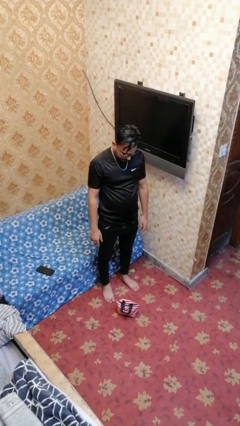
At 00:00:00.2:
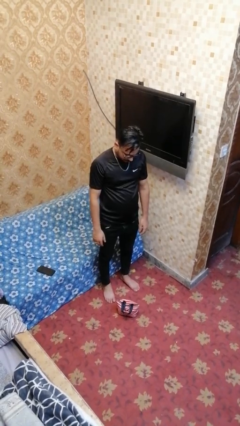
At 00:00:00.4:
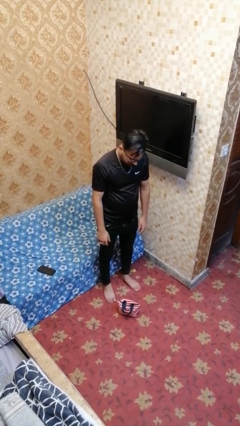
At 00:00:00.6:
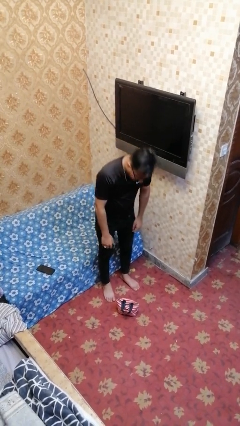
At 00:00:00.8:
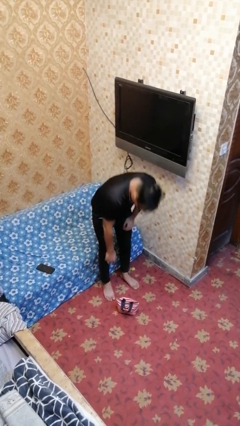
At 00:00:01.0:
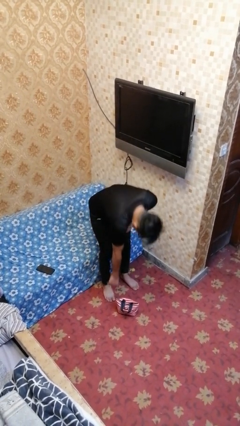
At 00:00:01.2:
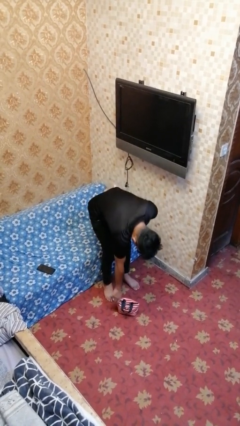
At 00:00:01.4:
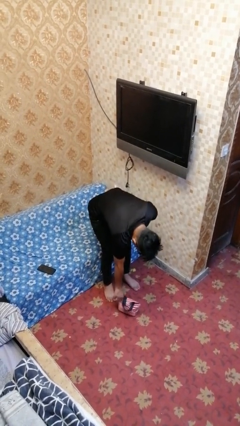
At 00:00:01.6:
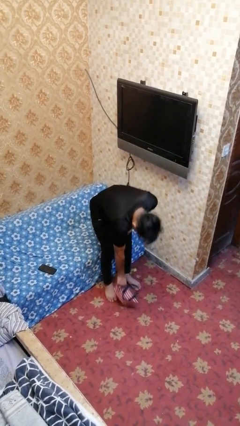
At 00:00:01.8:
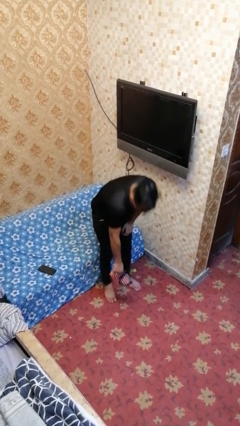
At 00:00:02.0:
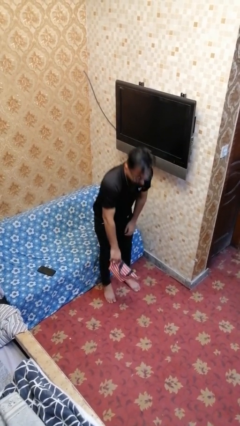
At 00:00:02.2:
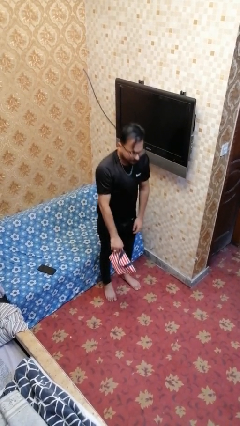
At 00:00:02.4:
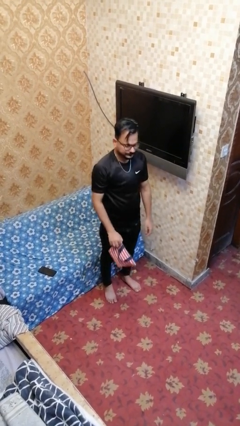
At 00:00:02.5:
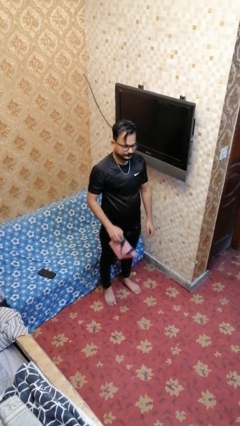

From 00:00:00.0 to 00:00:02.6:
person picks up object from floor

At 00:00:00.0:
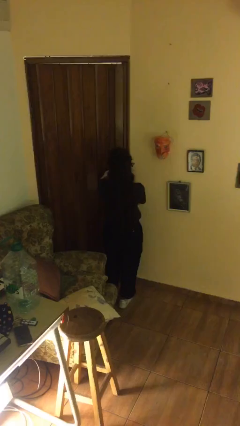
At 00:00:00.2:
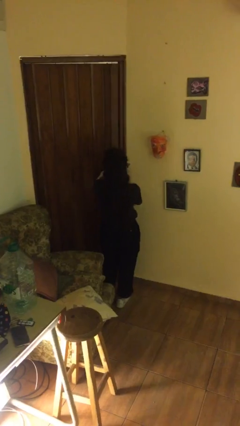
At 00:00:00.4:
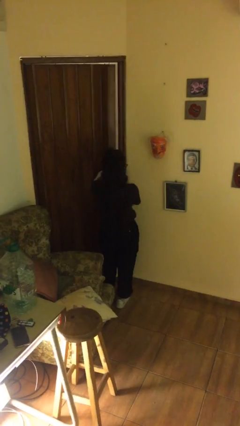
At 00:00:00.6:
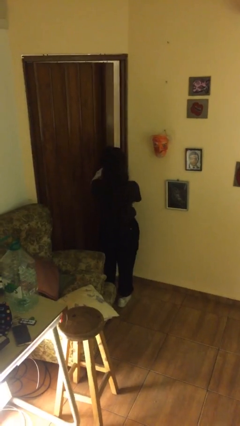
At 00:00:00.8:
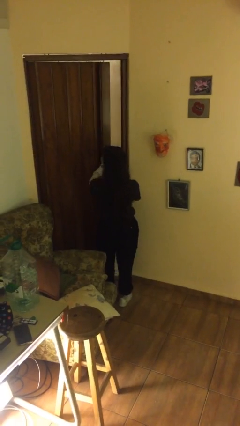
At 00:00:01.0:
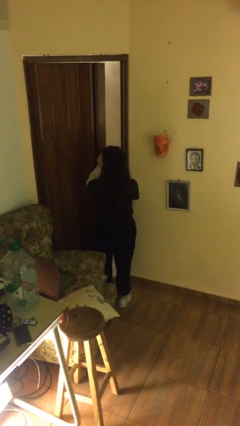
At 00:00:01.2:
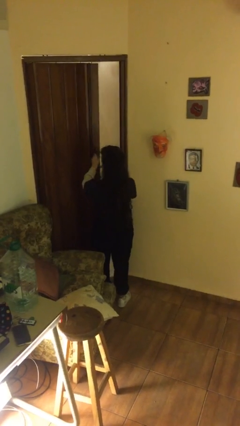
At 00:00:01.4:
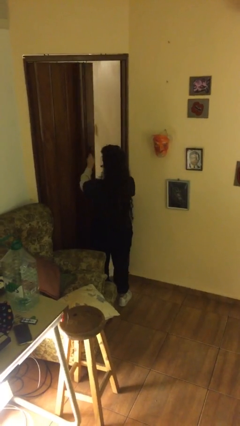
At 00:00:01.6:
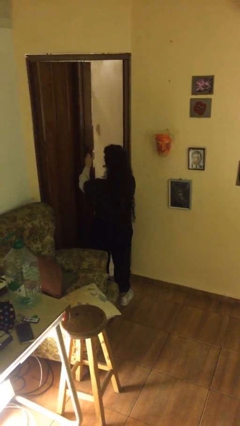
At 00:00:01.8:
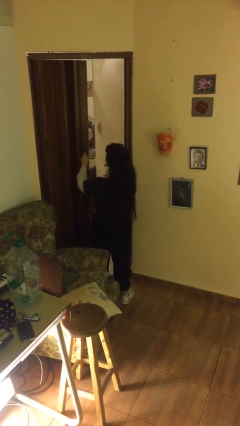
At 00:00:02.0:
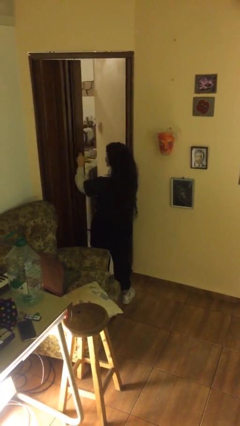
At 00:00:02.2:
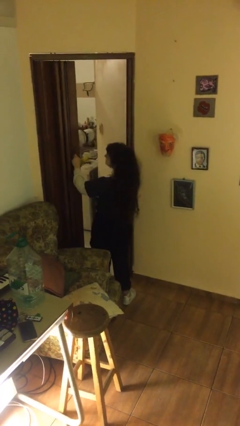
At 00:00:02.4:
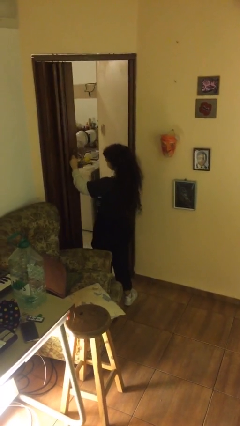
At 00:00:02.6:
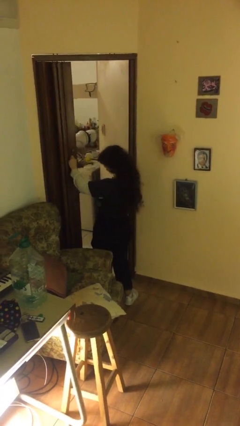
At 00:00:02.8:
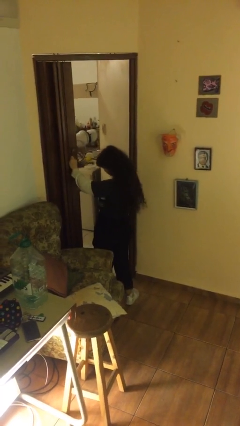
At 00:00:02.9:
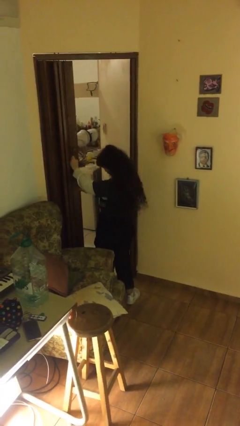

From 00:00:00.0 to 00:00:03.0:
person opens sliding door

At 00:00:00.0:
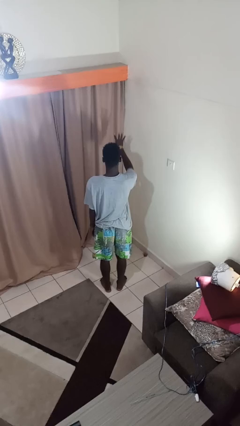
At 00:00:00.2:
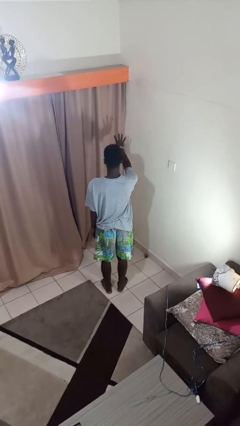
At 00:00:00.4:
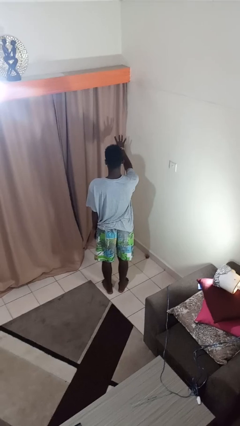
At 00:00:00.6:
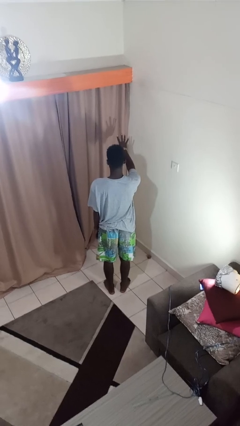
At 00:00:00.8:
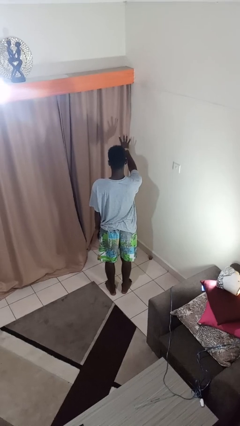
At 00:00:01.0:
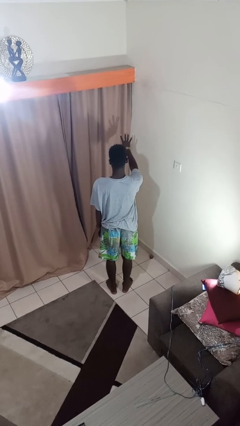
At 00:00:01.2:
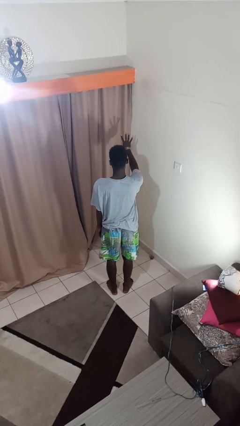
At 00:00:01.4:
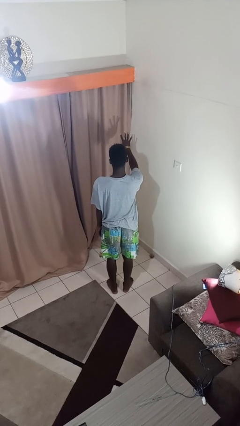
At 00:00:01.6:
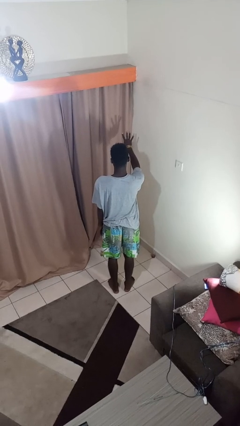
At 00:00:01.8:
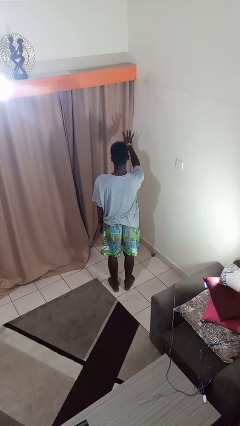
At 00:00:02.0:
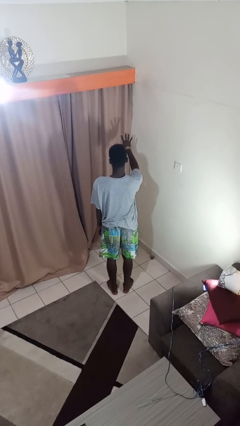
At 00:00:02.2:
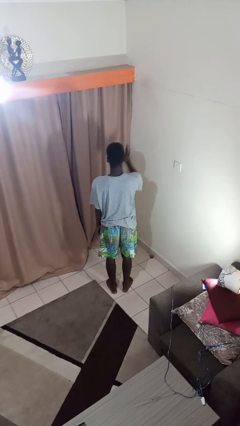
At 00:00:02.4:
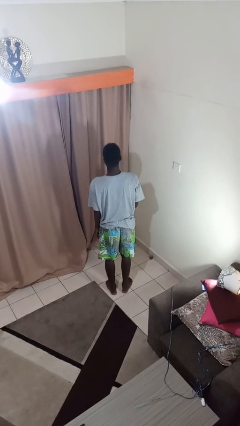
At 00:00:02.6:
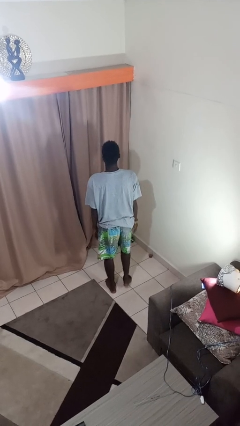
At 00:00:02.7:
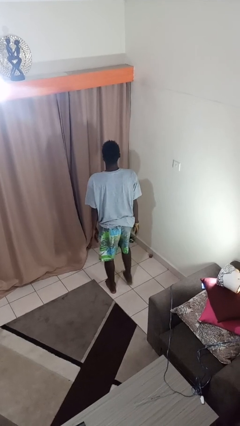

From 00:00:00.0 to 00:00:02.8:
person gestures number four

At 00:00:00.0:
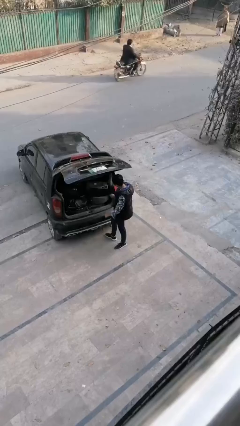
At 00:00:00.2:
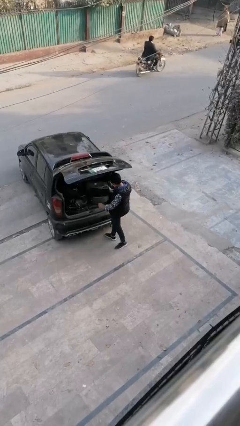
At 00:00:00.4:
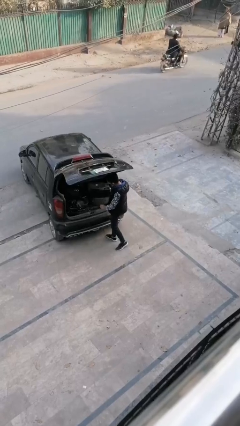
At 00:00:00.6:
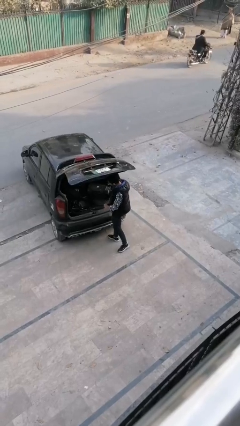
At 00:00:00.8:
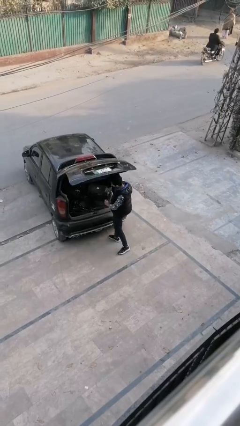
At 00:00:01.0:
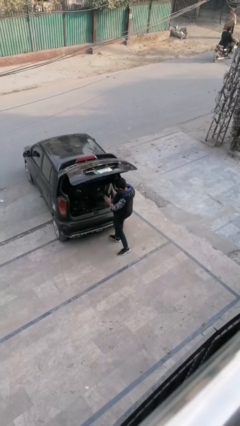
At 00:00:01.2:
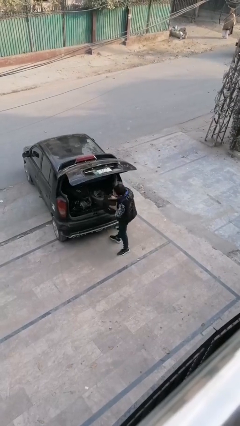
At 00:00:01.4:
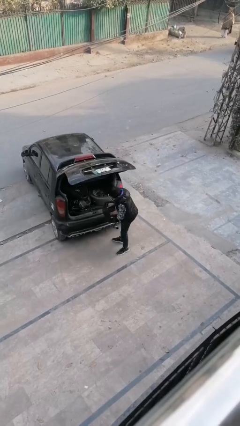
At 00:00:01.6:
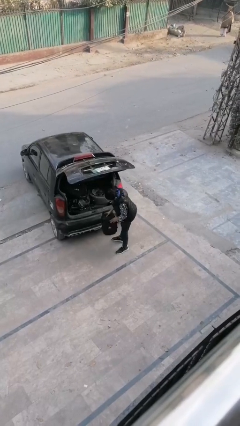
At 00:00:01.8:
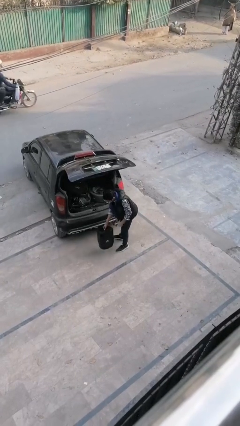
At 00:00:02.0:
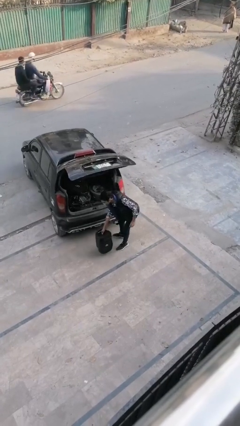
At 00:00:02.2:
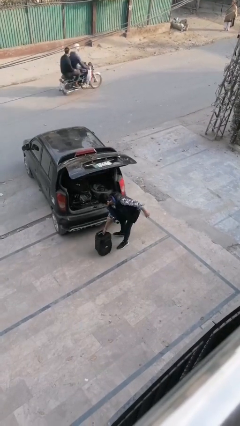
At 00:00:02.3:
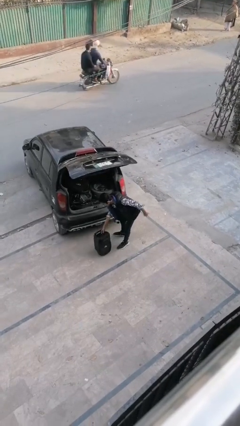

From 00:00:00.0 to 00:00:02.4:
person unloads car

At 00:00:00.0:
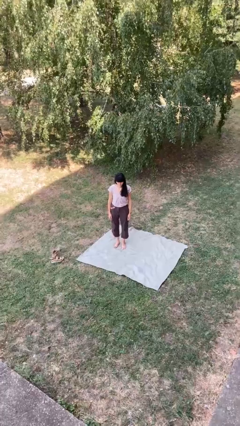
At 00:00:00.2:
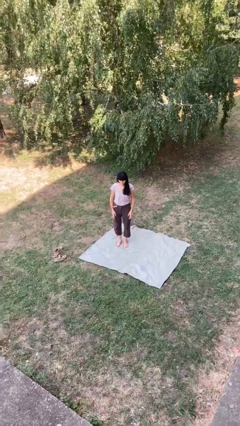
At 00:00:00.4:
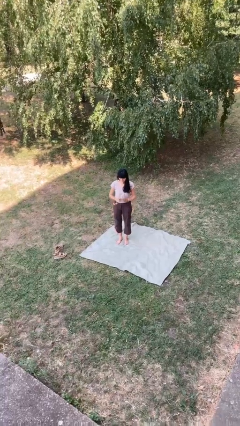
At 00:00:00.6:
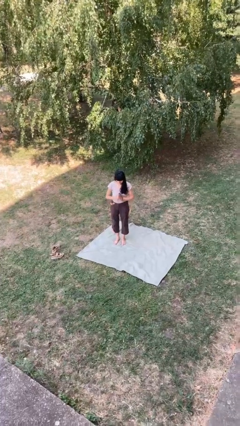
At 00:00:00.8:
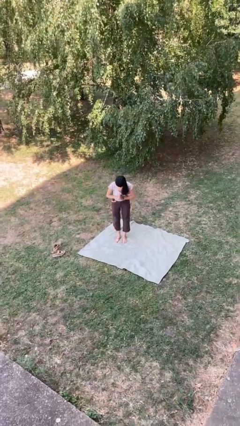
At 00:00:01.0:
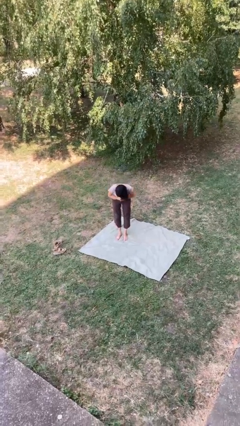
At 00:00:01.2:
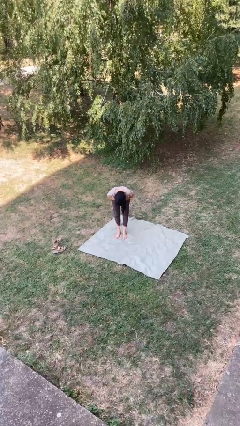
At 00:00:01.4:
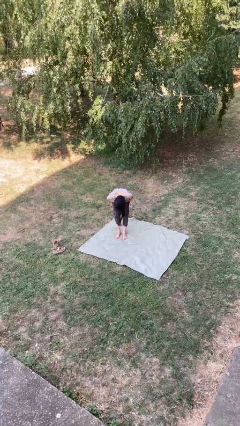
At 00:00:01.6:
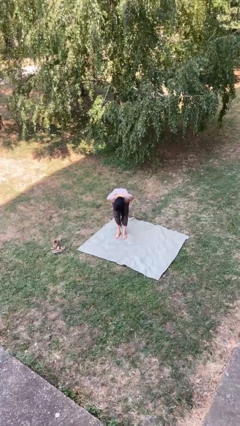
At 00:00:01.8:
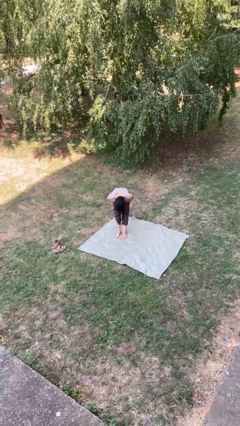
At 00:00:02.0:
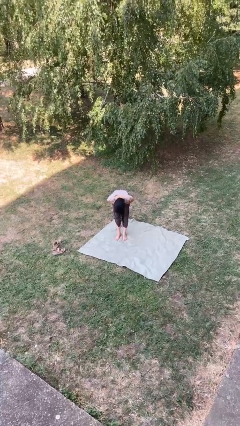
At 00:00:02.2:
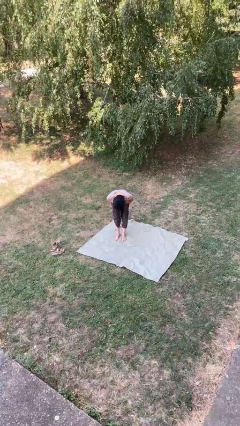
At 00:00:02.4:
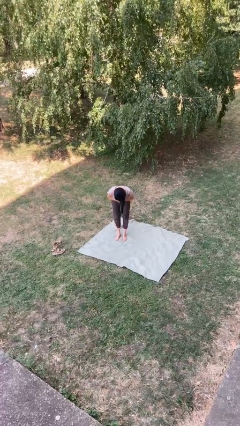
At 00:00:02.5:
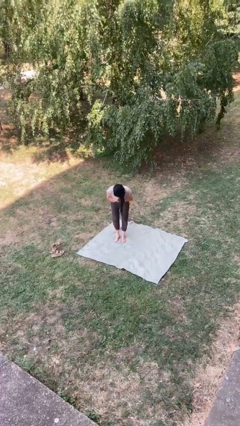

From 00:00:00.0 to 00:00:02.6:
person bows

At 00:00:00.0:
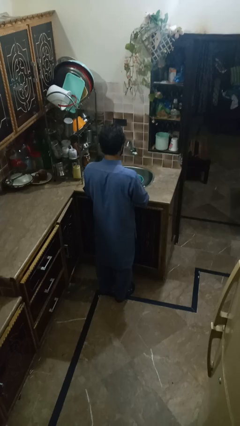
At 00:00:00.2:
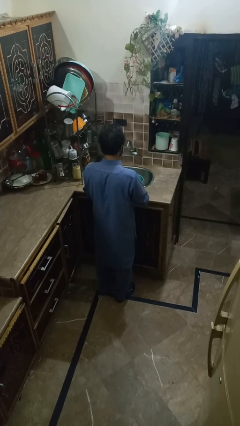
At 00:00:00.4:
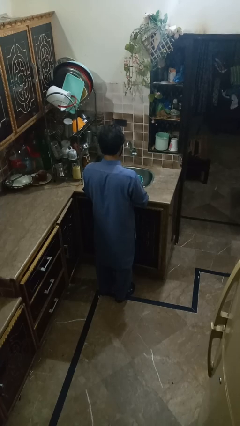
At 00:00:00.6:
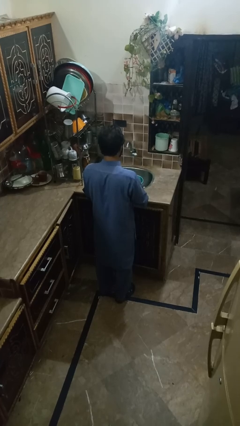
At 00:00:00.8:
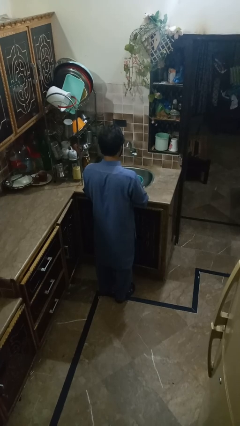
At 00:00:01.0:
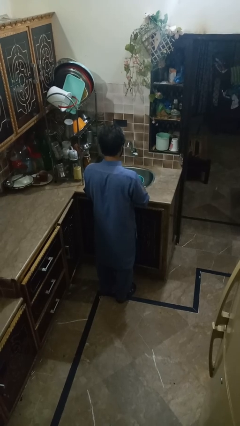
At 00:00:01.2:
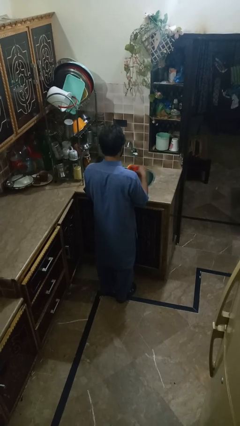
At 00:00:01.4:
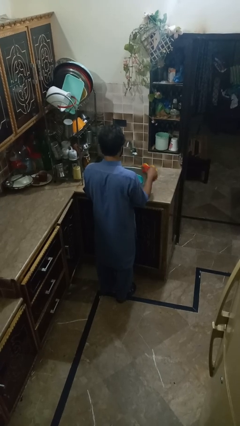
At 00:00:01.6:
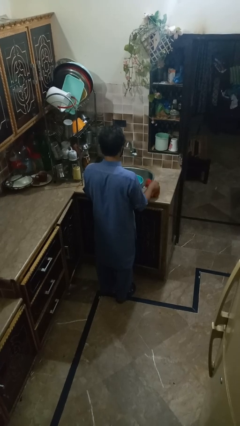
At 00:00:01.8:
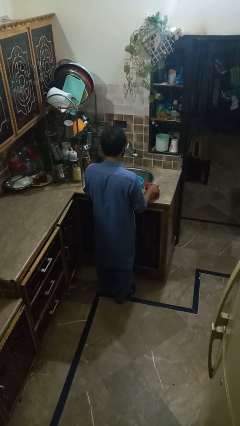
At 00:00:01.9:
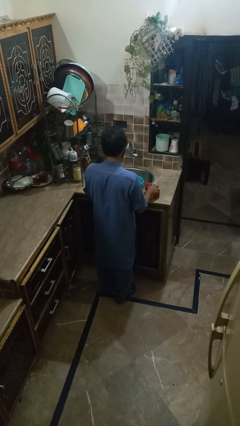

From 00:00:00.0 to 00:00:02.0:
person pours into bowl

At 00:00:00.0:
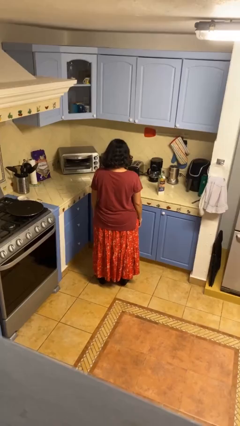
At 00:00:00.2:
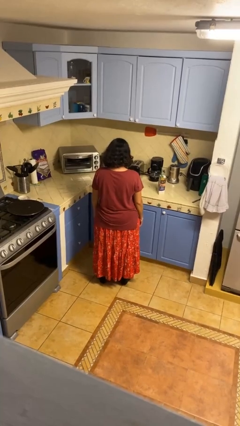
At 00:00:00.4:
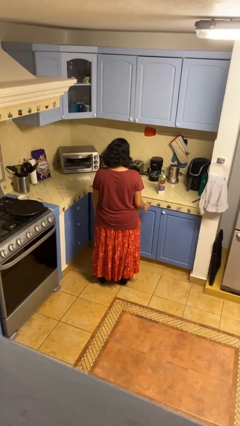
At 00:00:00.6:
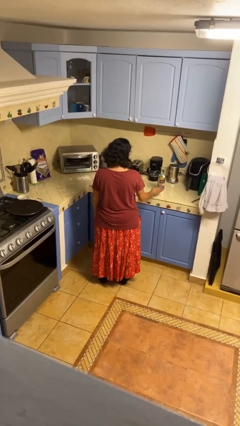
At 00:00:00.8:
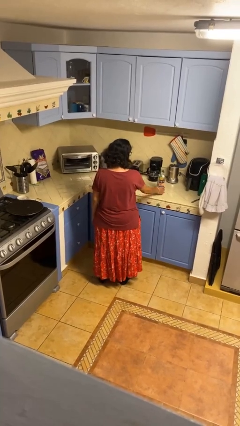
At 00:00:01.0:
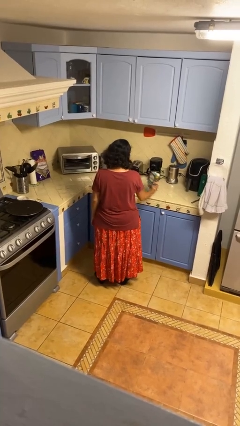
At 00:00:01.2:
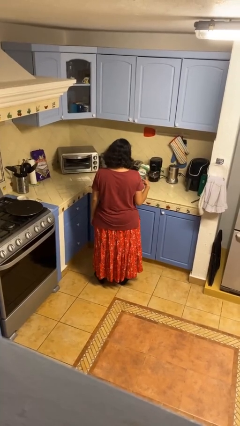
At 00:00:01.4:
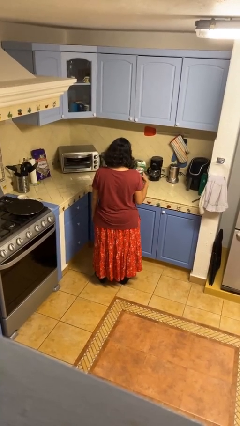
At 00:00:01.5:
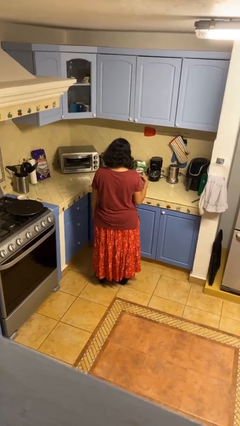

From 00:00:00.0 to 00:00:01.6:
person picks up object from countertop
